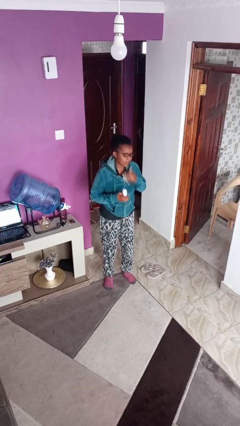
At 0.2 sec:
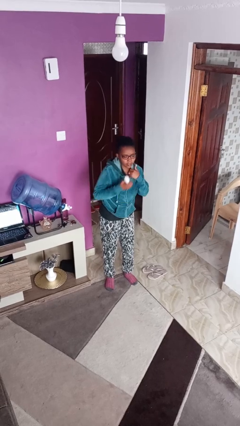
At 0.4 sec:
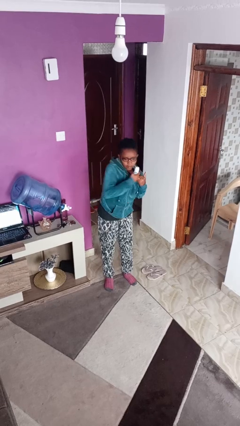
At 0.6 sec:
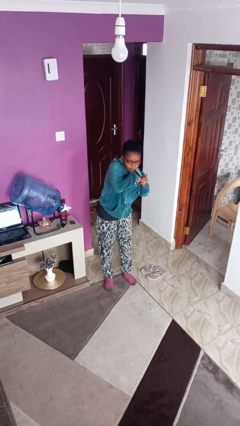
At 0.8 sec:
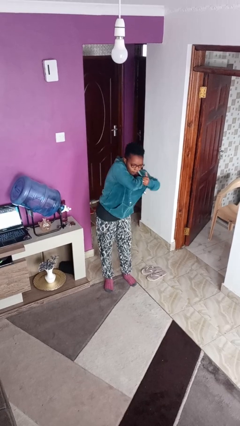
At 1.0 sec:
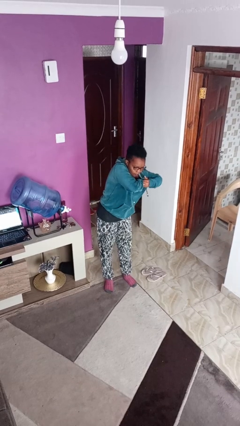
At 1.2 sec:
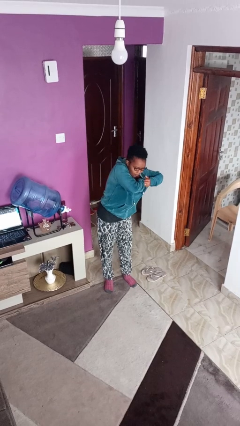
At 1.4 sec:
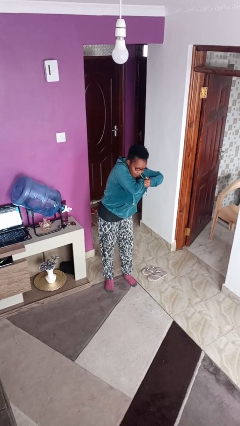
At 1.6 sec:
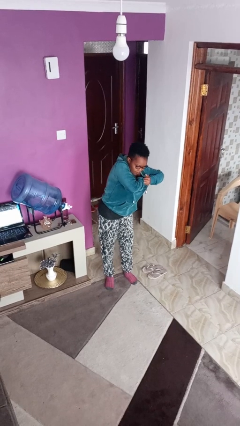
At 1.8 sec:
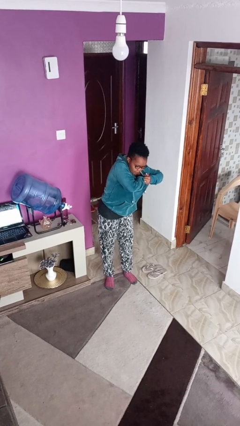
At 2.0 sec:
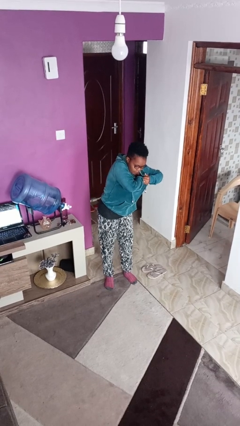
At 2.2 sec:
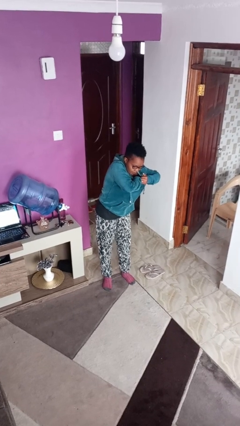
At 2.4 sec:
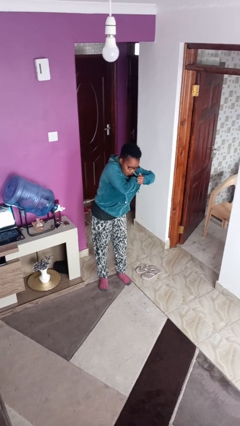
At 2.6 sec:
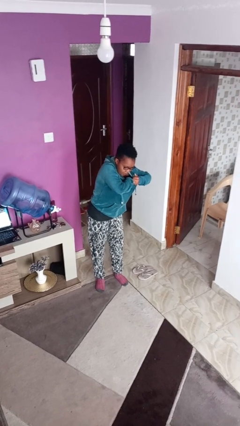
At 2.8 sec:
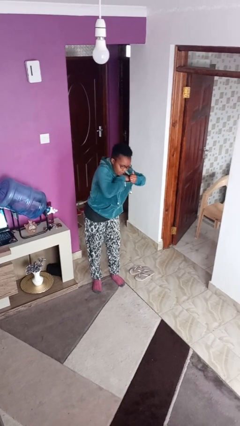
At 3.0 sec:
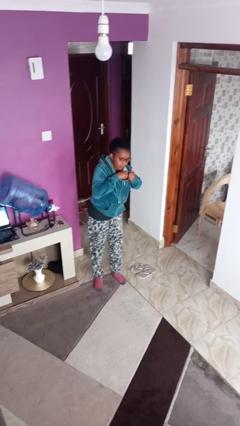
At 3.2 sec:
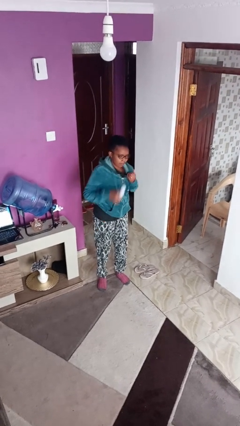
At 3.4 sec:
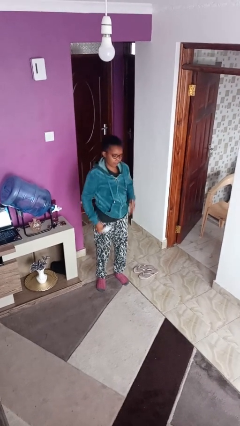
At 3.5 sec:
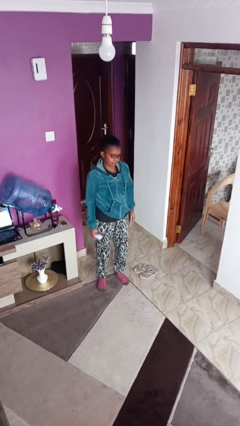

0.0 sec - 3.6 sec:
person applies deodorant

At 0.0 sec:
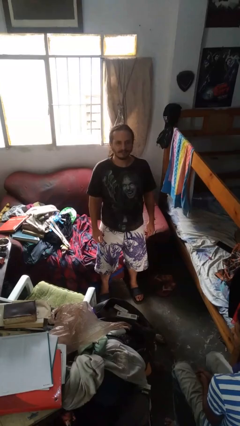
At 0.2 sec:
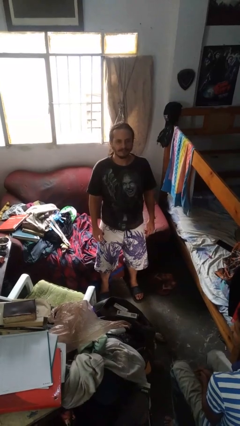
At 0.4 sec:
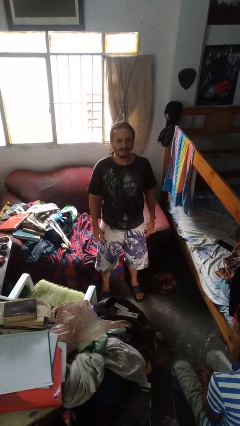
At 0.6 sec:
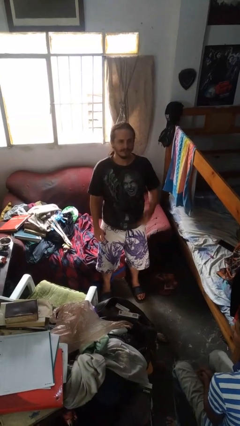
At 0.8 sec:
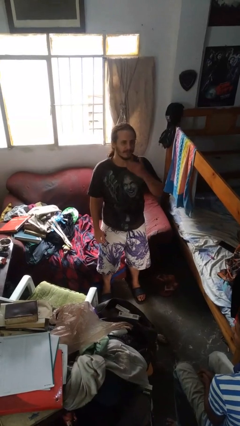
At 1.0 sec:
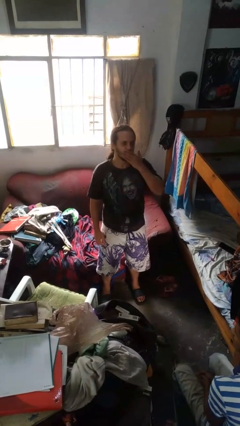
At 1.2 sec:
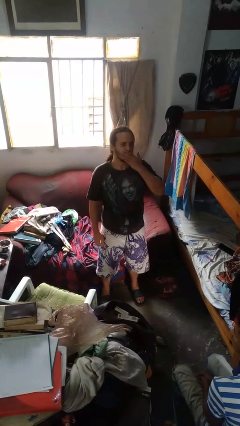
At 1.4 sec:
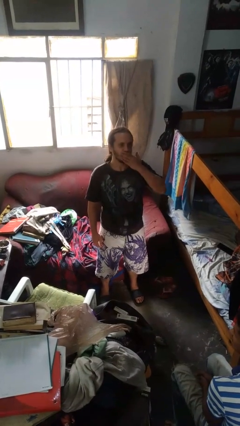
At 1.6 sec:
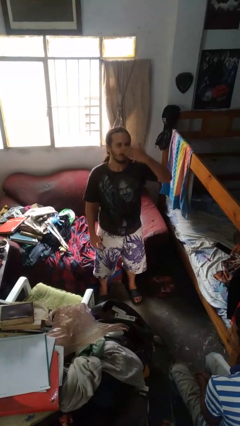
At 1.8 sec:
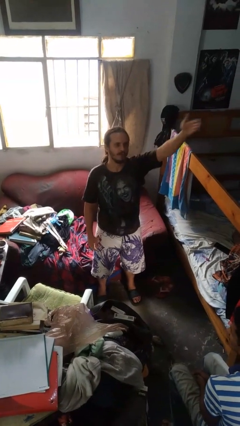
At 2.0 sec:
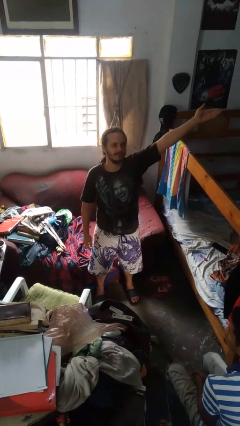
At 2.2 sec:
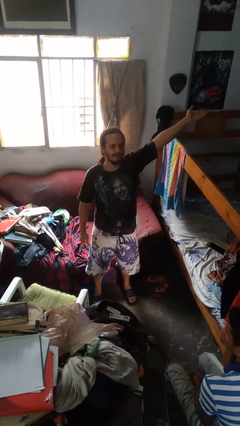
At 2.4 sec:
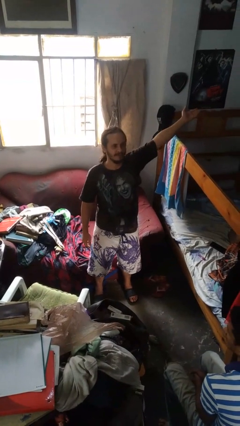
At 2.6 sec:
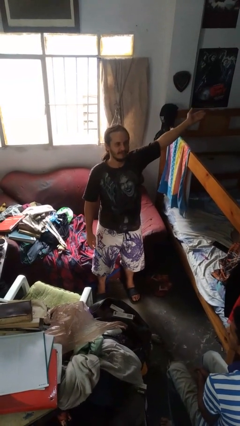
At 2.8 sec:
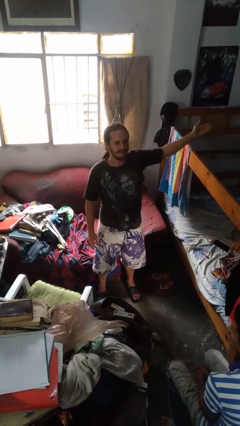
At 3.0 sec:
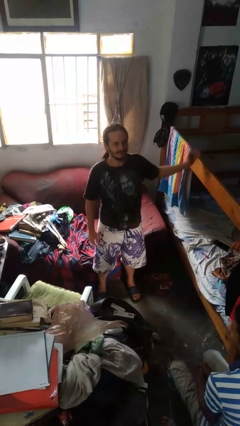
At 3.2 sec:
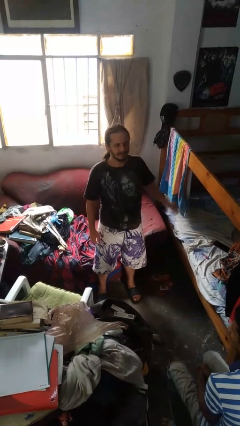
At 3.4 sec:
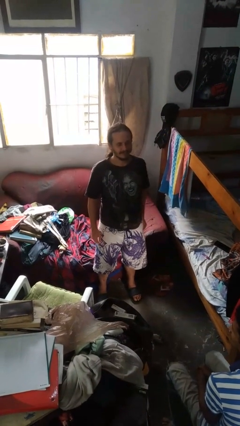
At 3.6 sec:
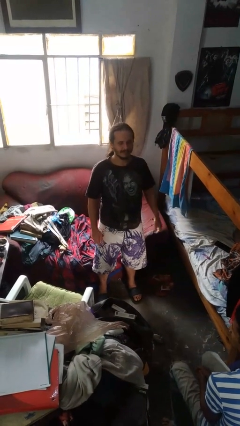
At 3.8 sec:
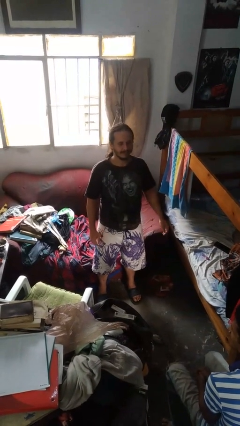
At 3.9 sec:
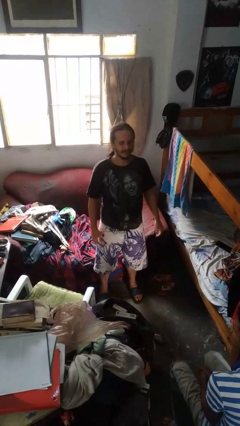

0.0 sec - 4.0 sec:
person gestures blow kiss

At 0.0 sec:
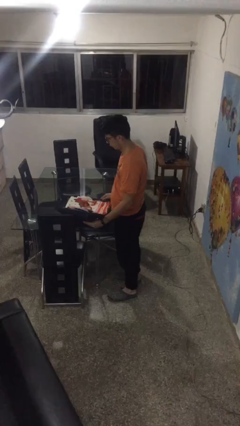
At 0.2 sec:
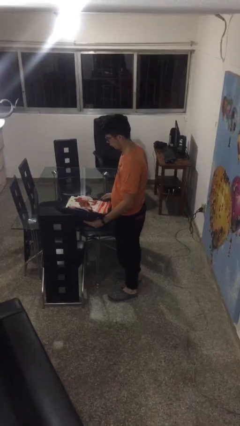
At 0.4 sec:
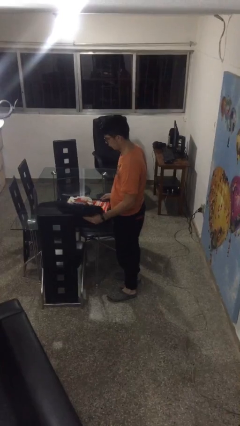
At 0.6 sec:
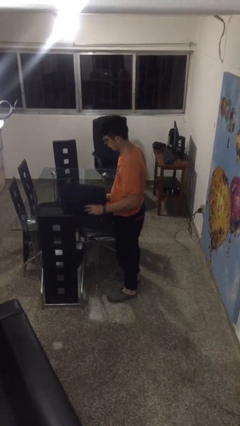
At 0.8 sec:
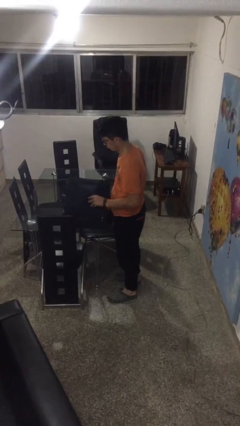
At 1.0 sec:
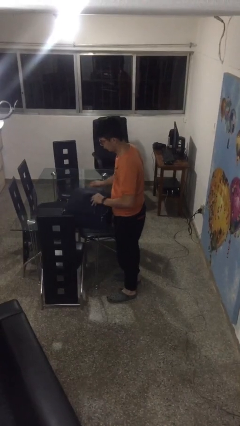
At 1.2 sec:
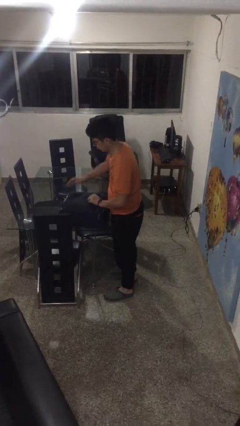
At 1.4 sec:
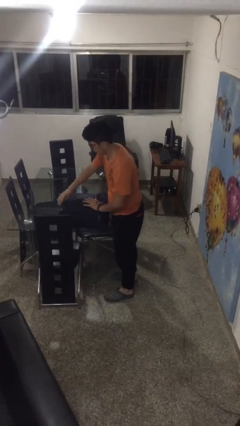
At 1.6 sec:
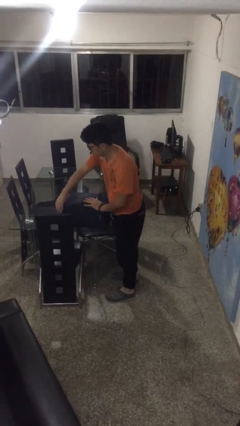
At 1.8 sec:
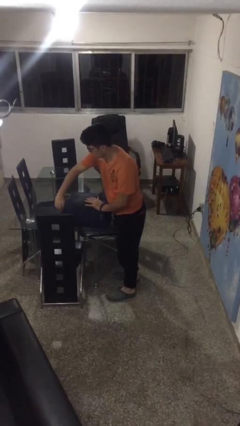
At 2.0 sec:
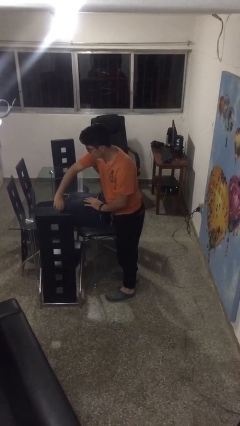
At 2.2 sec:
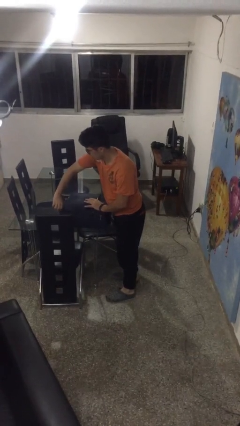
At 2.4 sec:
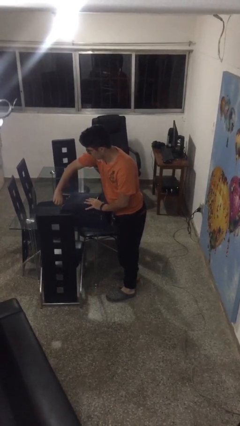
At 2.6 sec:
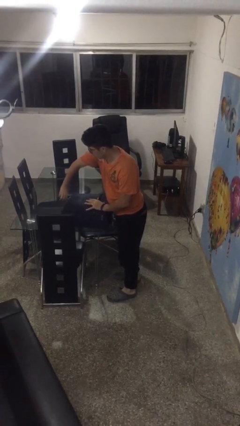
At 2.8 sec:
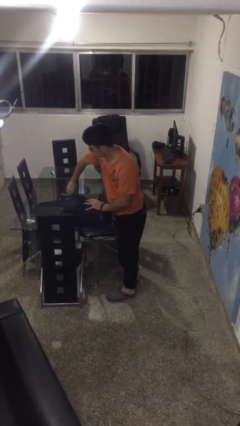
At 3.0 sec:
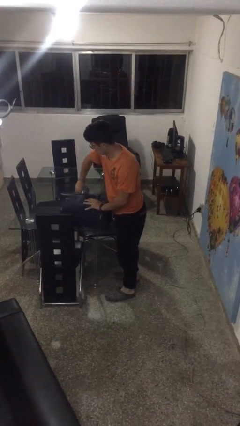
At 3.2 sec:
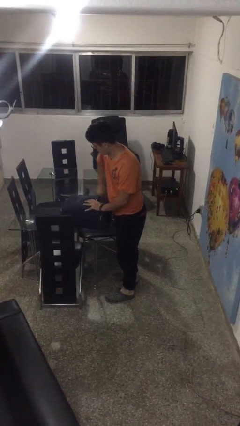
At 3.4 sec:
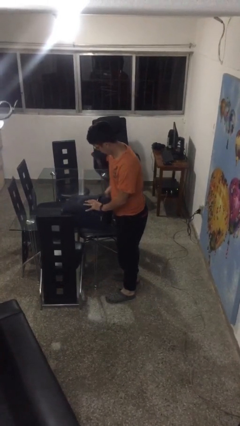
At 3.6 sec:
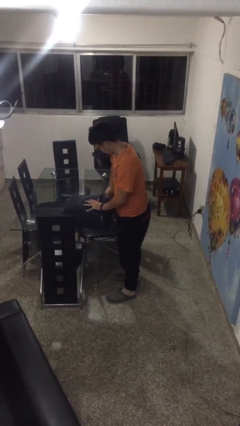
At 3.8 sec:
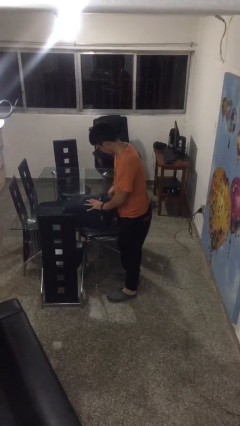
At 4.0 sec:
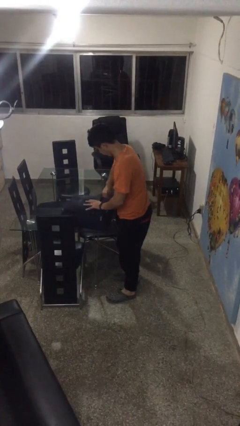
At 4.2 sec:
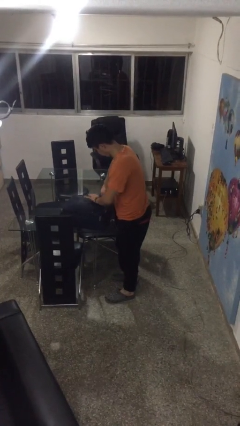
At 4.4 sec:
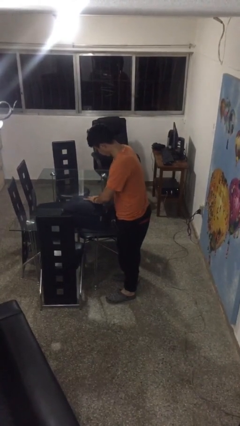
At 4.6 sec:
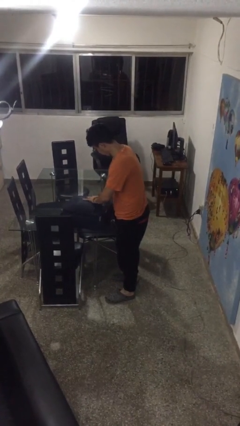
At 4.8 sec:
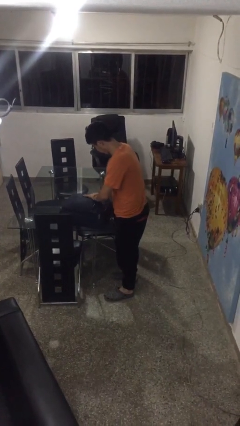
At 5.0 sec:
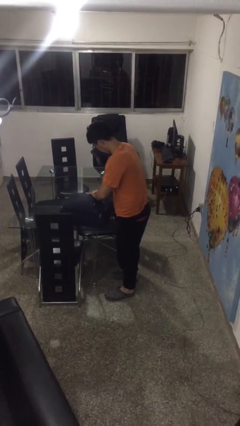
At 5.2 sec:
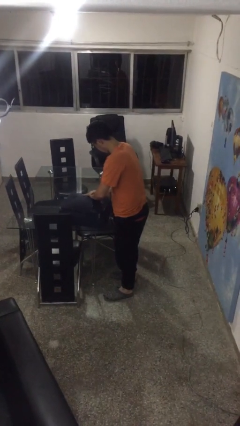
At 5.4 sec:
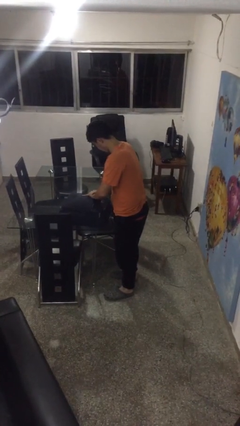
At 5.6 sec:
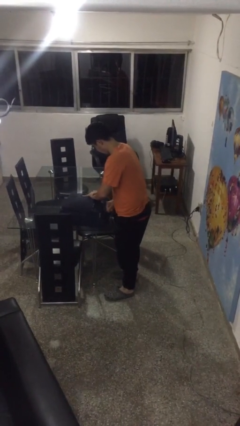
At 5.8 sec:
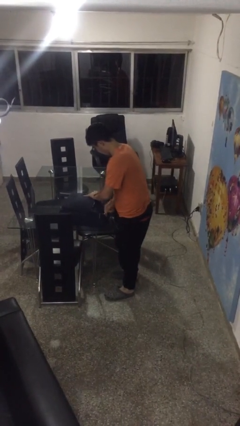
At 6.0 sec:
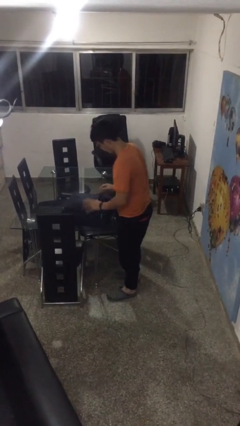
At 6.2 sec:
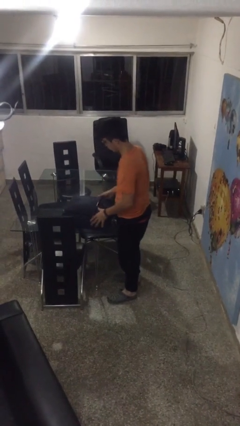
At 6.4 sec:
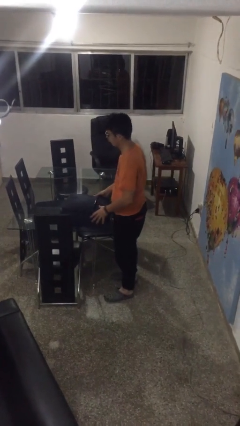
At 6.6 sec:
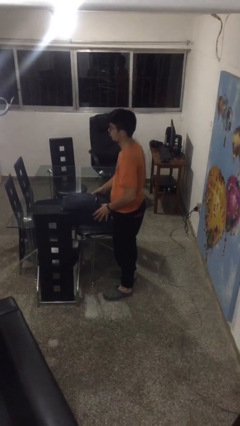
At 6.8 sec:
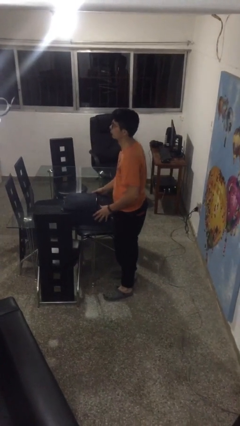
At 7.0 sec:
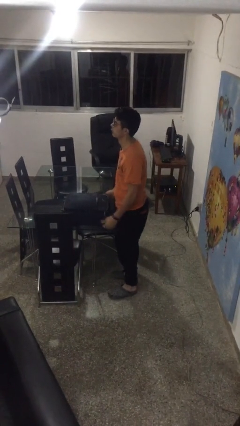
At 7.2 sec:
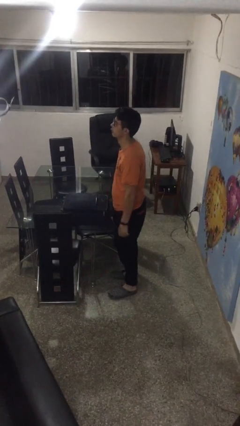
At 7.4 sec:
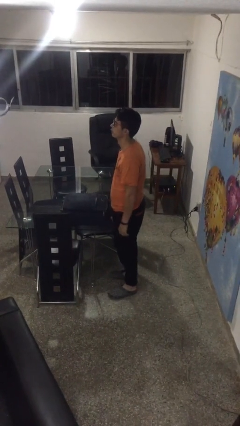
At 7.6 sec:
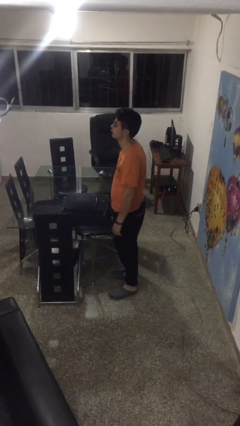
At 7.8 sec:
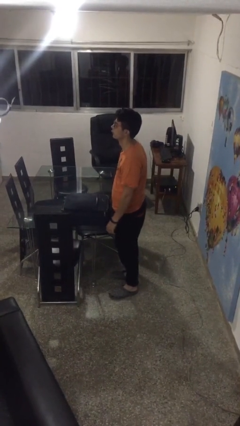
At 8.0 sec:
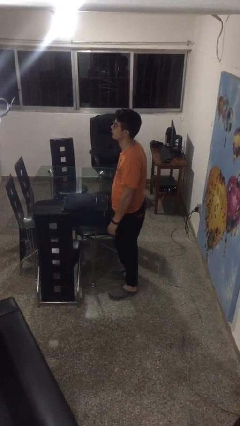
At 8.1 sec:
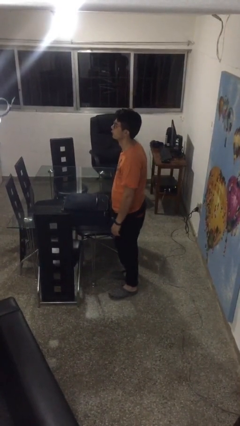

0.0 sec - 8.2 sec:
person closes suitcase

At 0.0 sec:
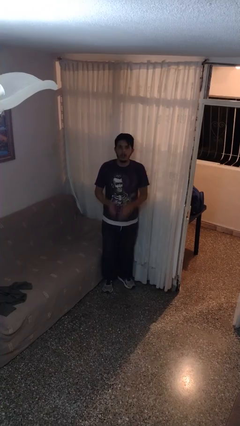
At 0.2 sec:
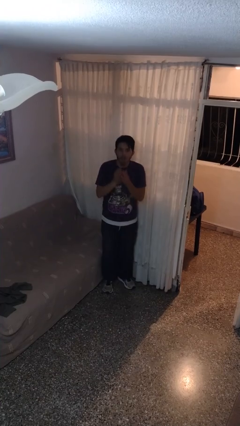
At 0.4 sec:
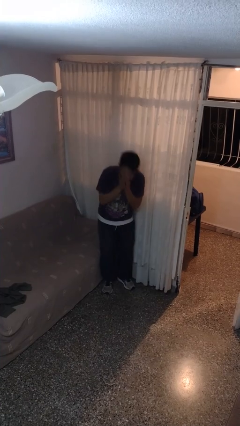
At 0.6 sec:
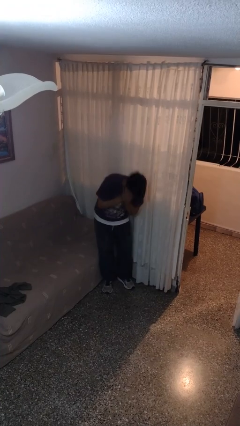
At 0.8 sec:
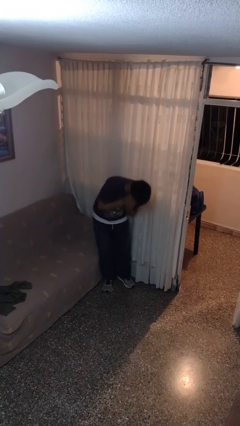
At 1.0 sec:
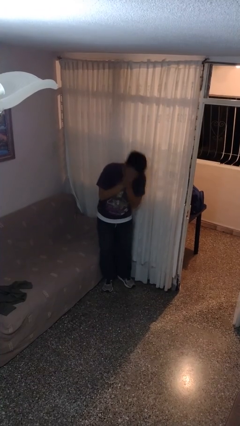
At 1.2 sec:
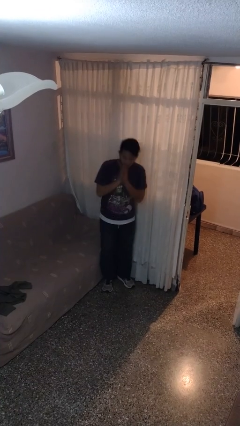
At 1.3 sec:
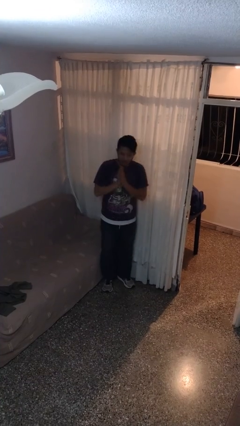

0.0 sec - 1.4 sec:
person sneezes into hand

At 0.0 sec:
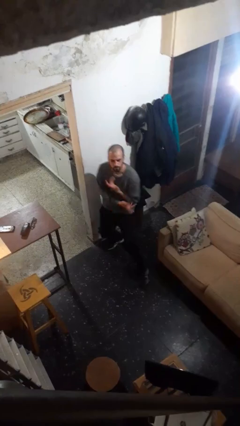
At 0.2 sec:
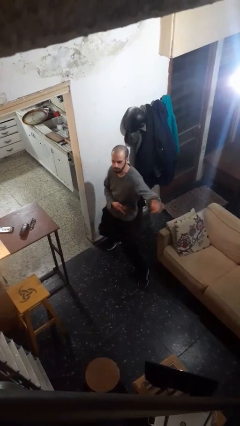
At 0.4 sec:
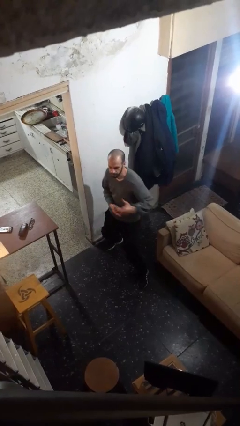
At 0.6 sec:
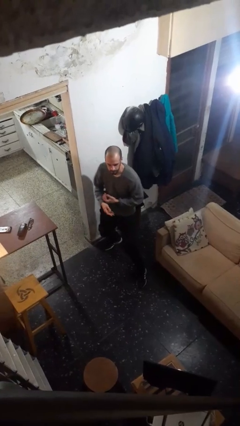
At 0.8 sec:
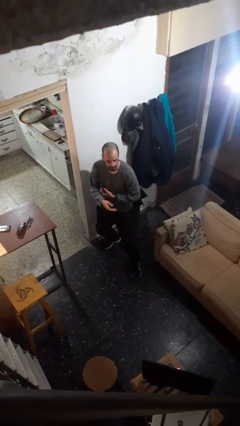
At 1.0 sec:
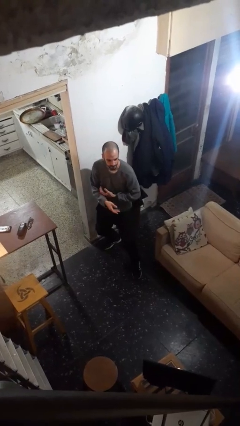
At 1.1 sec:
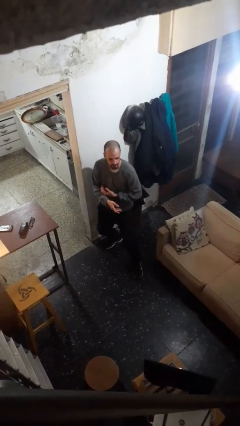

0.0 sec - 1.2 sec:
person karate chop
